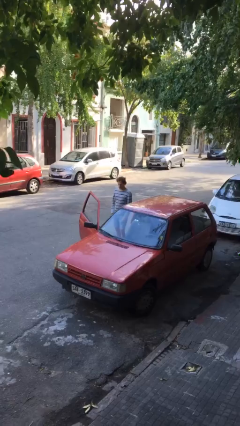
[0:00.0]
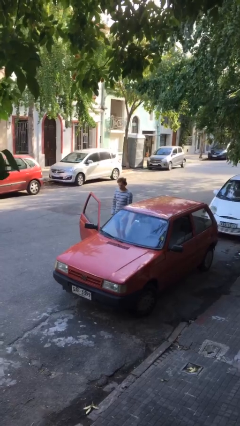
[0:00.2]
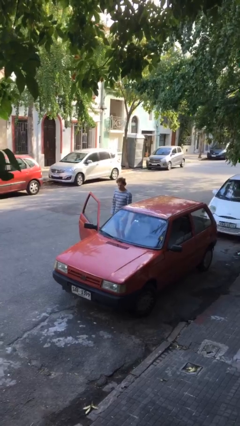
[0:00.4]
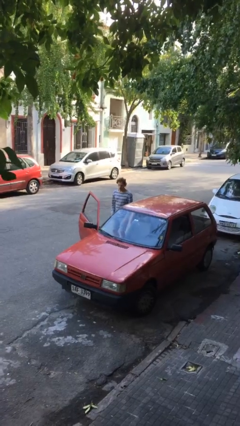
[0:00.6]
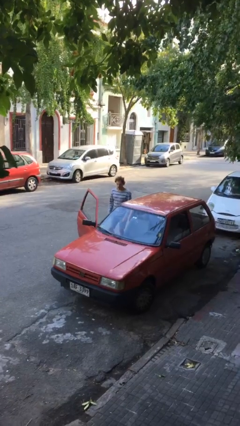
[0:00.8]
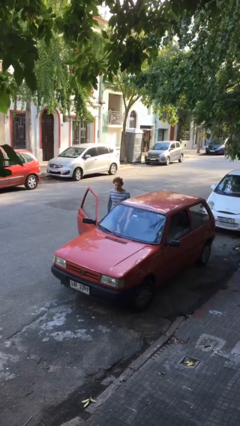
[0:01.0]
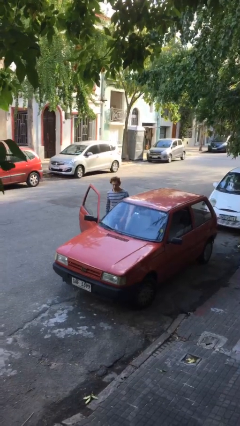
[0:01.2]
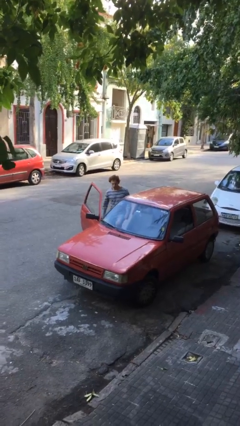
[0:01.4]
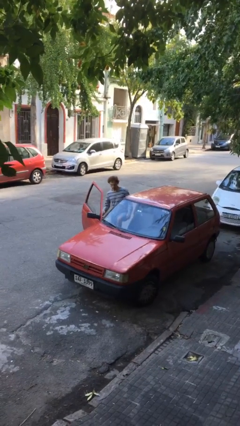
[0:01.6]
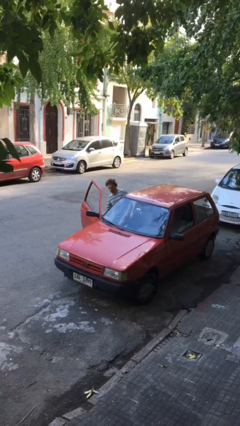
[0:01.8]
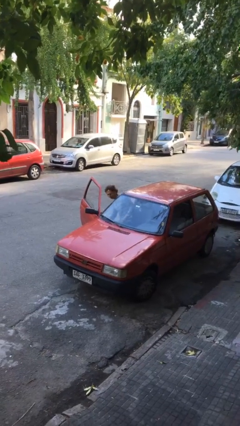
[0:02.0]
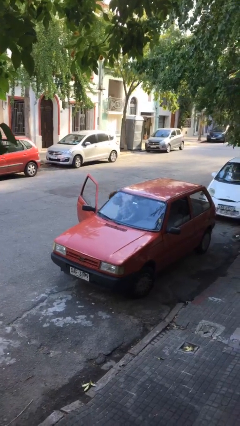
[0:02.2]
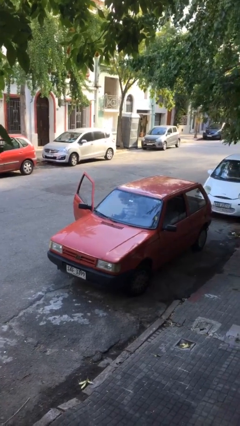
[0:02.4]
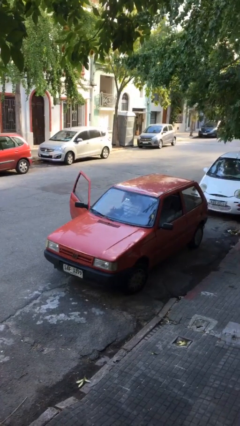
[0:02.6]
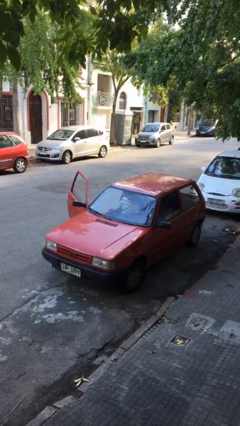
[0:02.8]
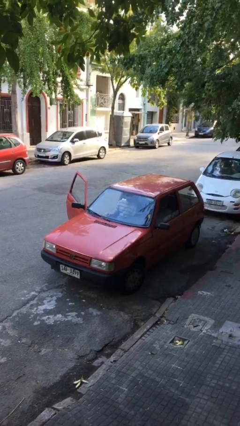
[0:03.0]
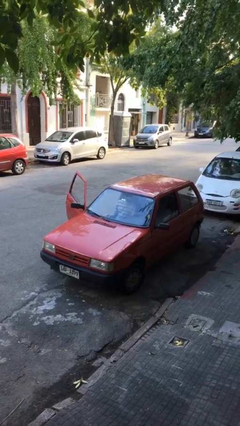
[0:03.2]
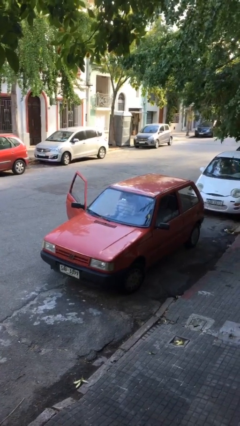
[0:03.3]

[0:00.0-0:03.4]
person enters car

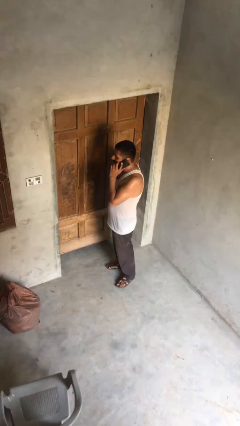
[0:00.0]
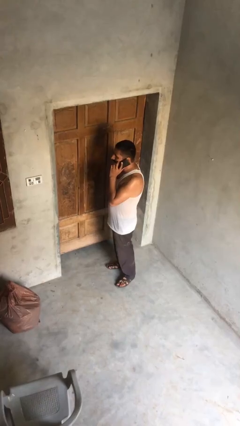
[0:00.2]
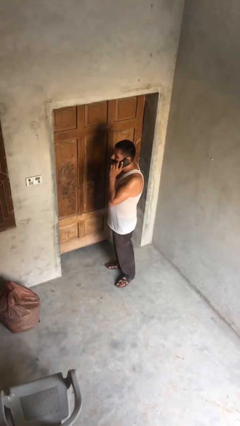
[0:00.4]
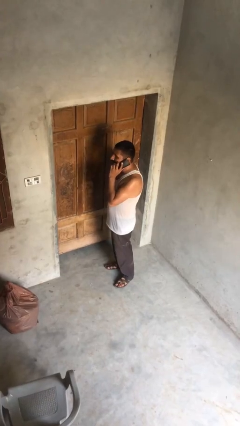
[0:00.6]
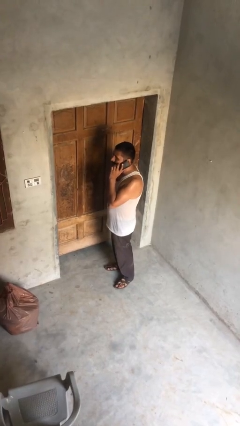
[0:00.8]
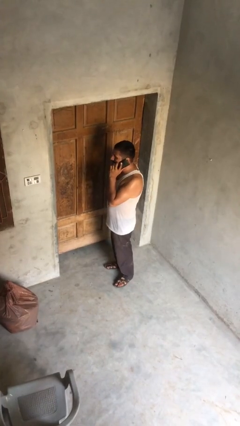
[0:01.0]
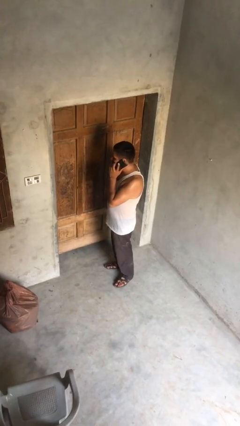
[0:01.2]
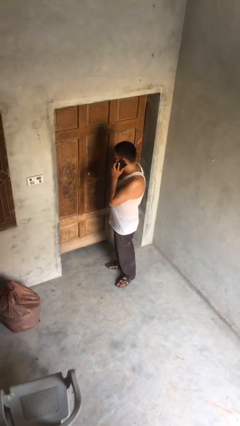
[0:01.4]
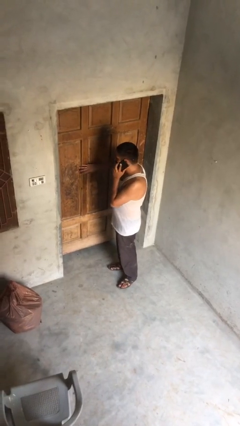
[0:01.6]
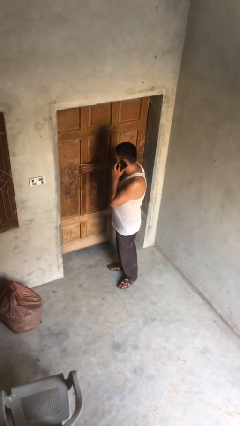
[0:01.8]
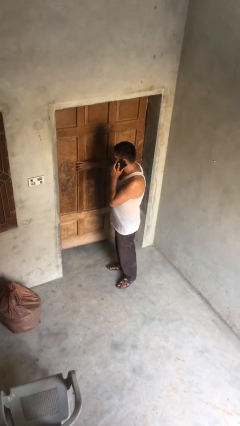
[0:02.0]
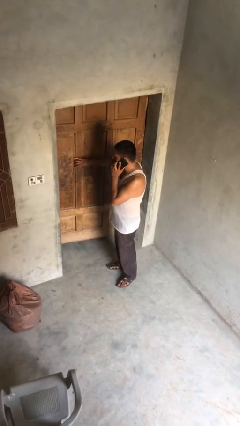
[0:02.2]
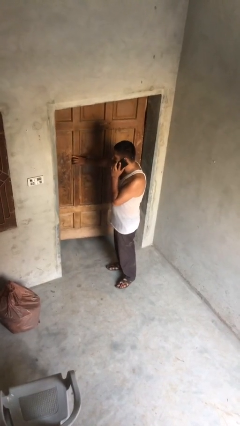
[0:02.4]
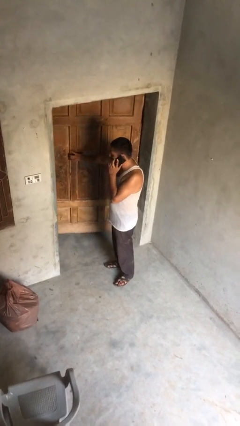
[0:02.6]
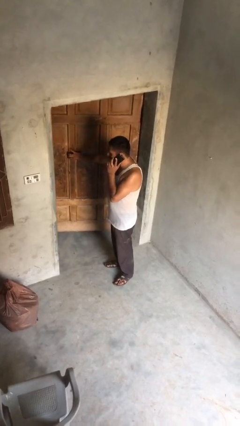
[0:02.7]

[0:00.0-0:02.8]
person opens facility door

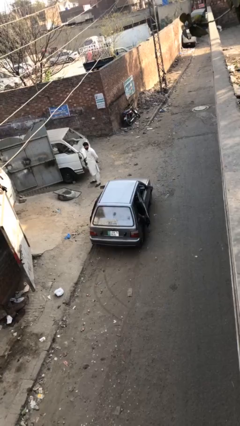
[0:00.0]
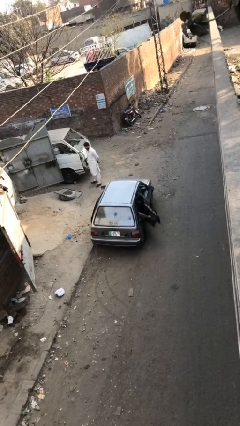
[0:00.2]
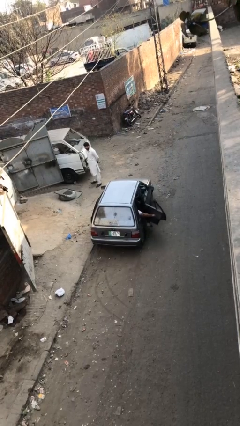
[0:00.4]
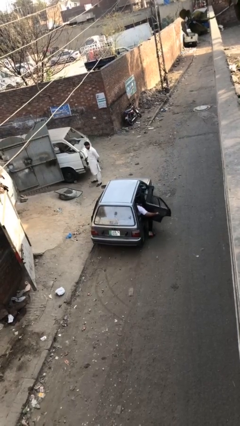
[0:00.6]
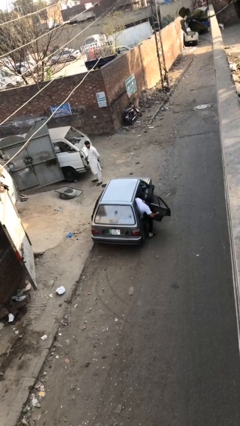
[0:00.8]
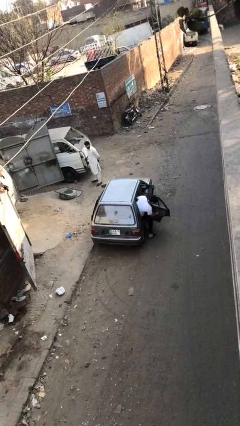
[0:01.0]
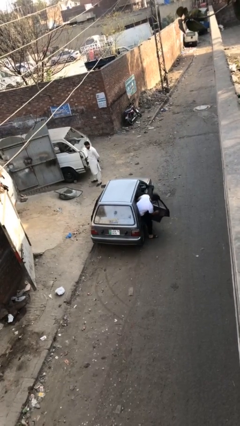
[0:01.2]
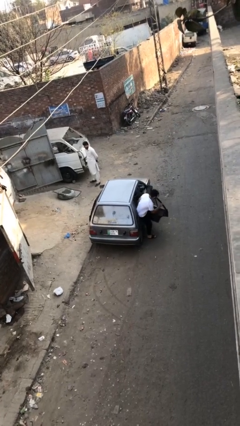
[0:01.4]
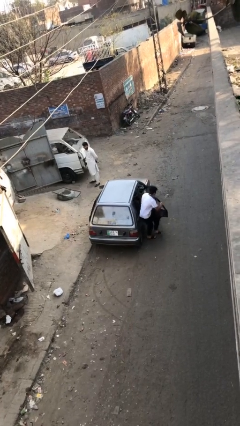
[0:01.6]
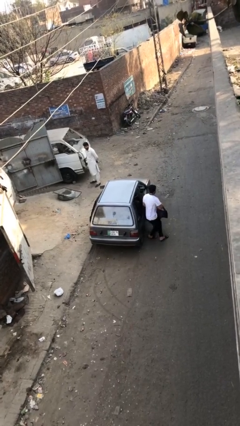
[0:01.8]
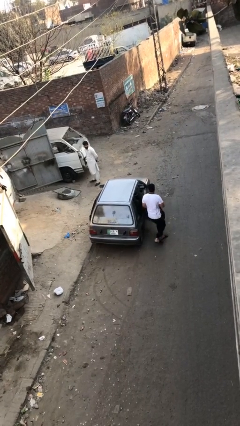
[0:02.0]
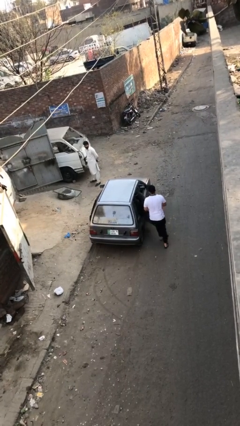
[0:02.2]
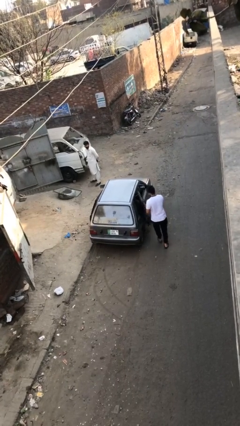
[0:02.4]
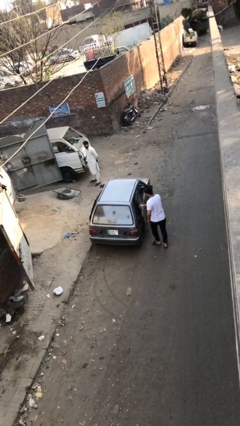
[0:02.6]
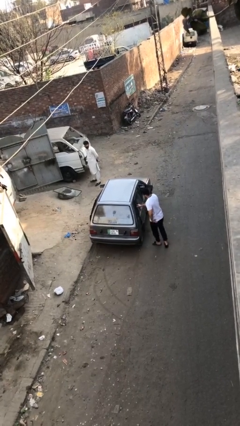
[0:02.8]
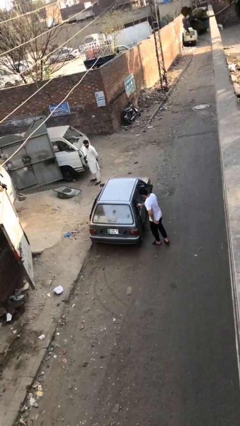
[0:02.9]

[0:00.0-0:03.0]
car drops off person

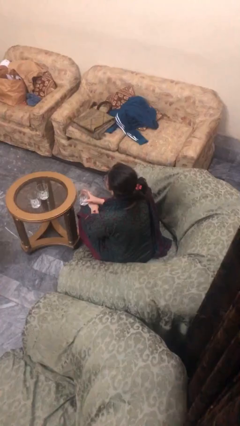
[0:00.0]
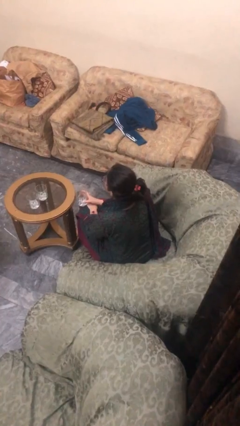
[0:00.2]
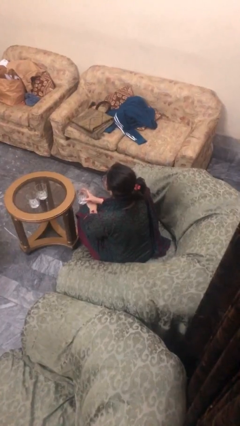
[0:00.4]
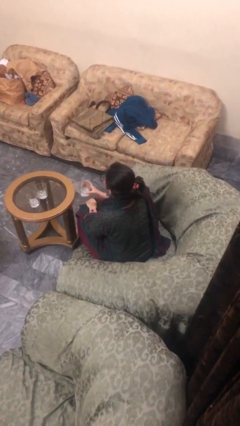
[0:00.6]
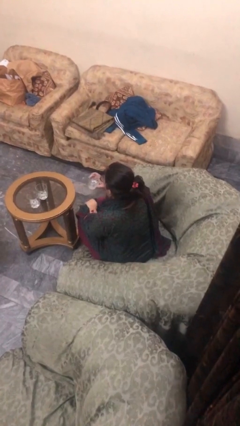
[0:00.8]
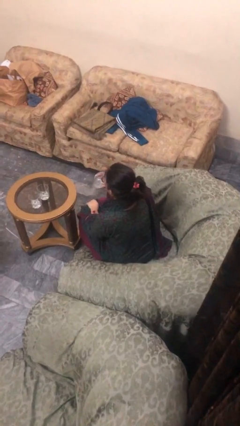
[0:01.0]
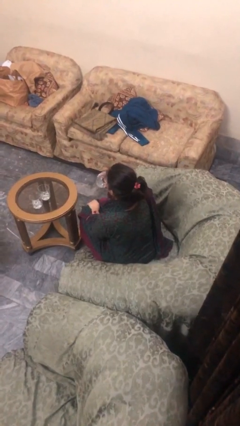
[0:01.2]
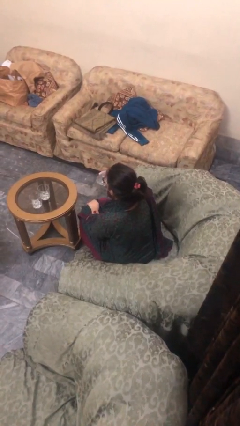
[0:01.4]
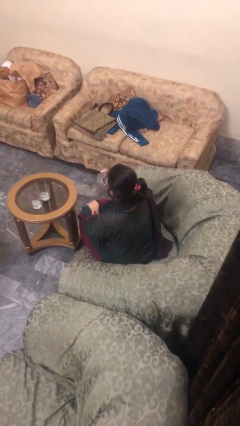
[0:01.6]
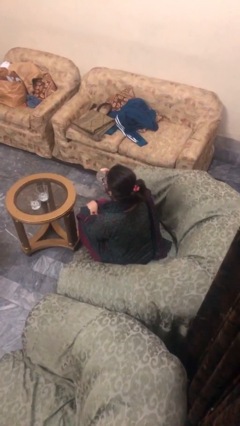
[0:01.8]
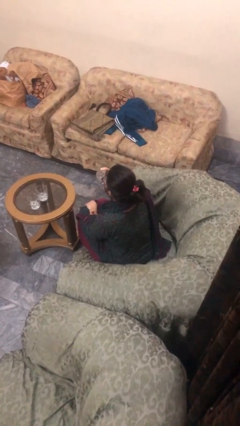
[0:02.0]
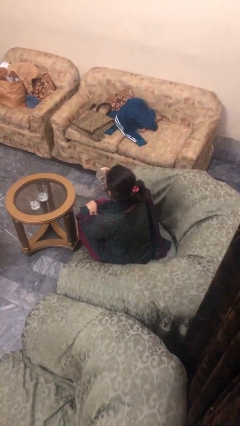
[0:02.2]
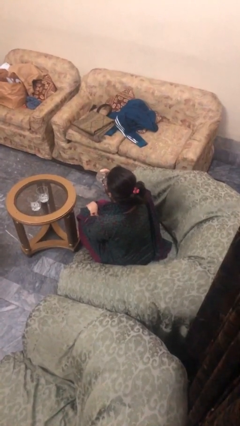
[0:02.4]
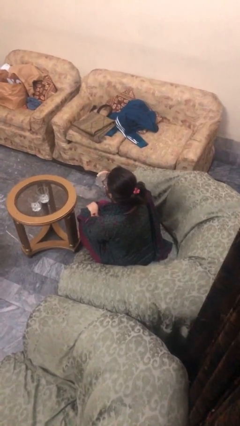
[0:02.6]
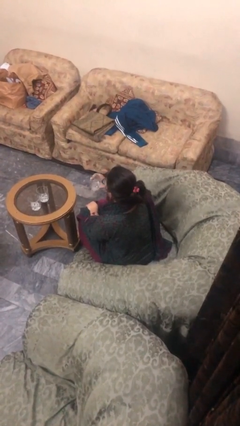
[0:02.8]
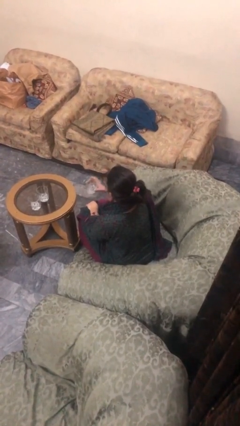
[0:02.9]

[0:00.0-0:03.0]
person drinks from shotglass

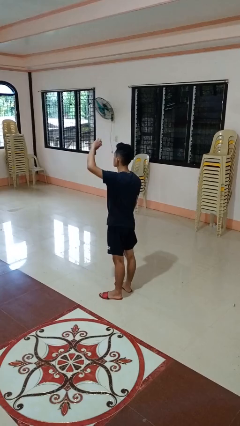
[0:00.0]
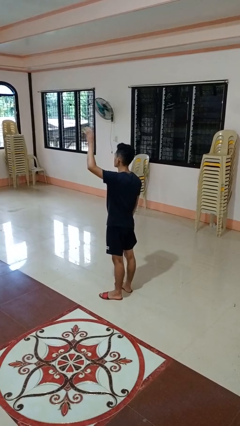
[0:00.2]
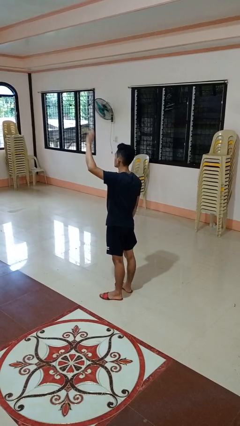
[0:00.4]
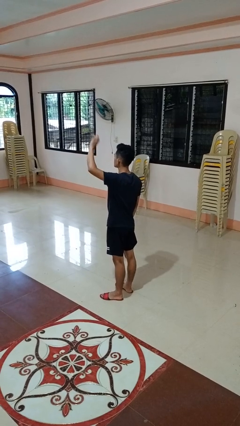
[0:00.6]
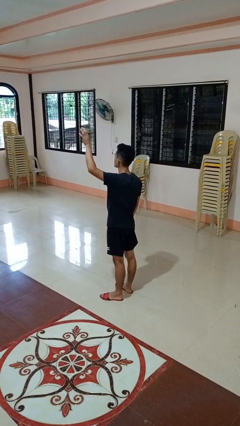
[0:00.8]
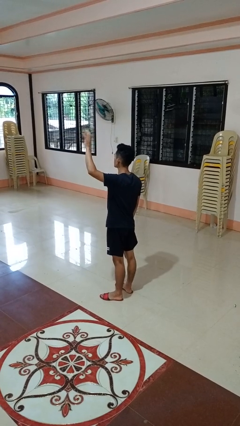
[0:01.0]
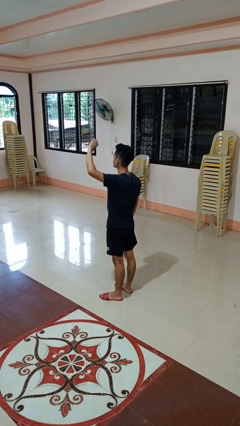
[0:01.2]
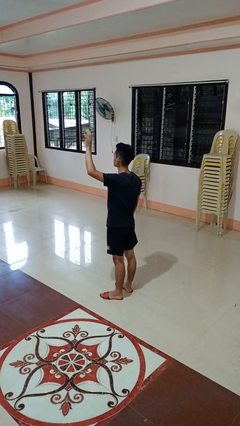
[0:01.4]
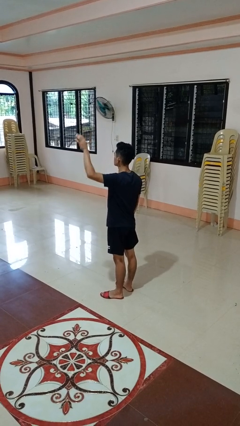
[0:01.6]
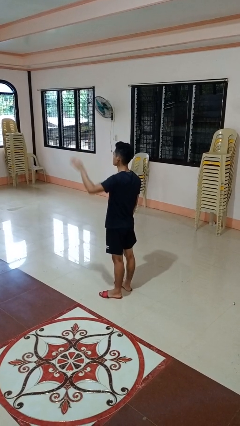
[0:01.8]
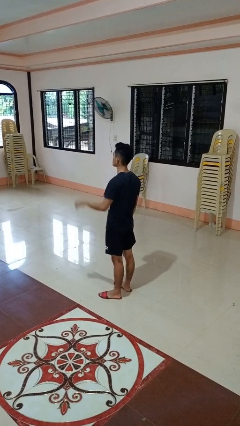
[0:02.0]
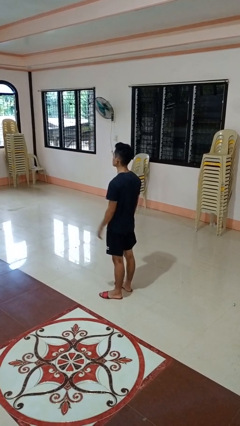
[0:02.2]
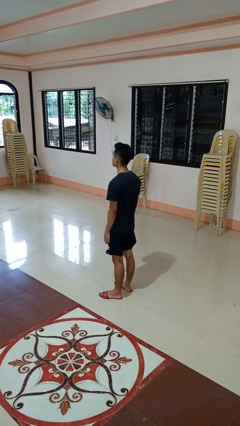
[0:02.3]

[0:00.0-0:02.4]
person waves at person

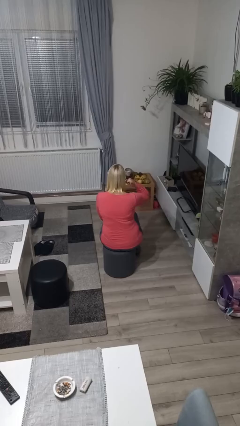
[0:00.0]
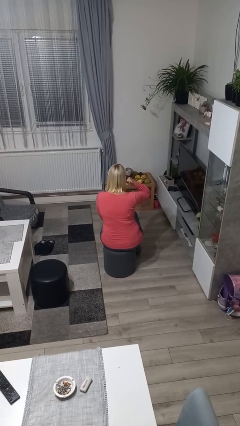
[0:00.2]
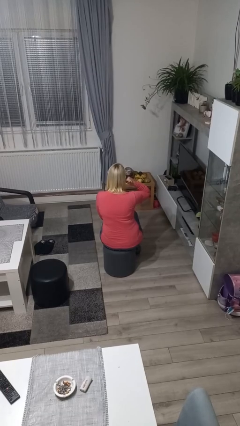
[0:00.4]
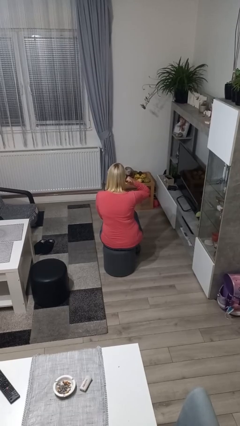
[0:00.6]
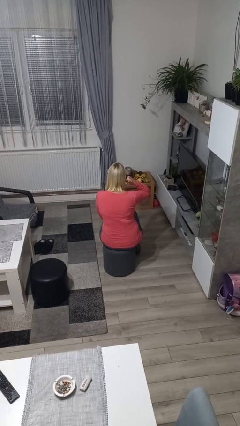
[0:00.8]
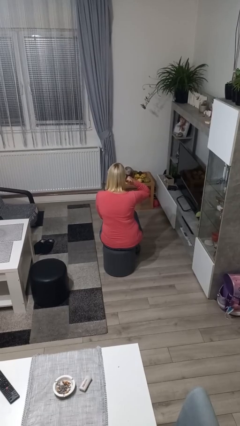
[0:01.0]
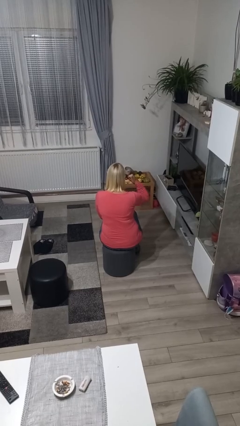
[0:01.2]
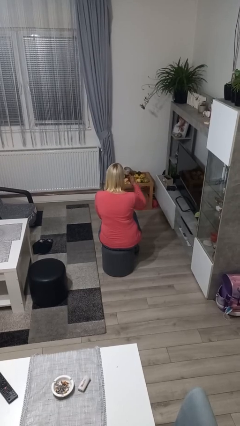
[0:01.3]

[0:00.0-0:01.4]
person gestures call me

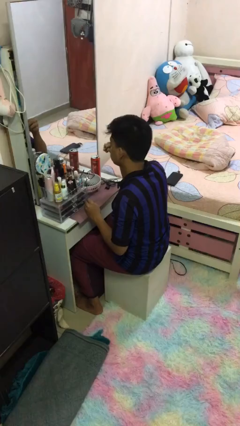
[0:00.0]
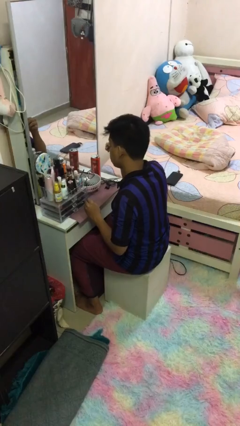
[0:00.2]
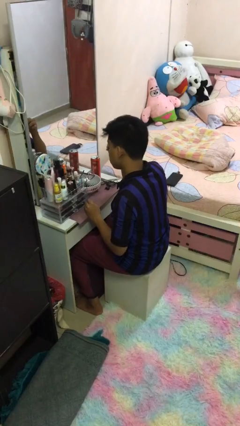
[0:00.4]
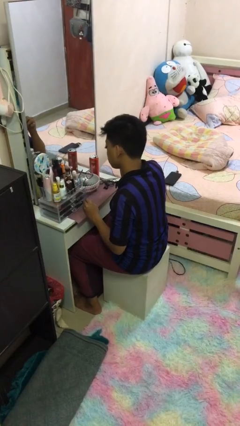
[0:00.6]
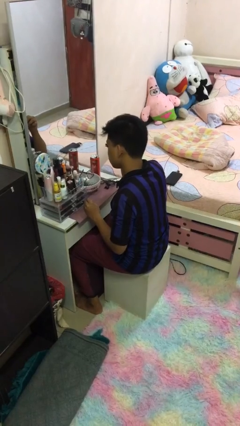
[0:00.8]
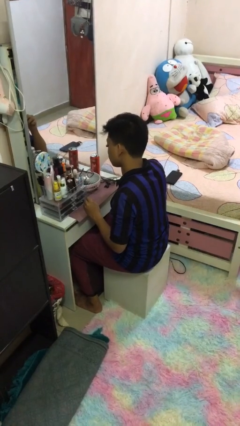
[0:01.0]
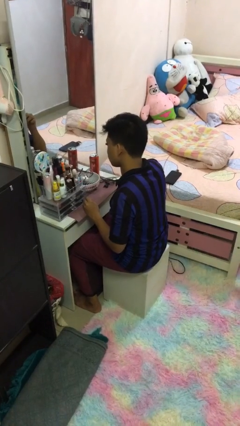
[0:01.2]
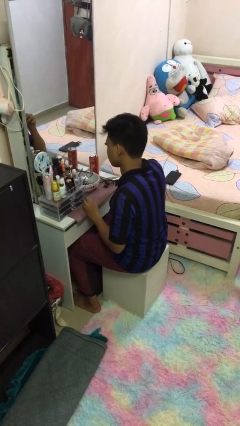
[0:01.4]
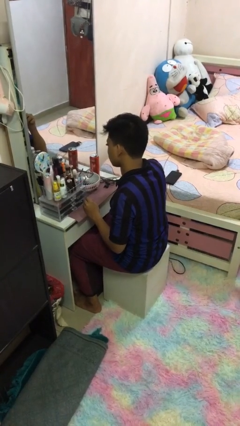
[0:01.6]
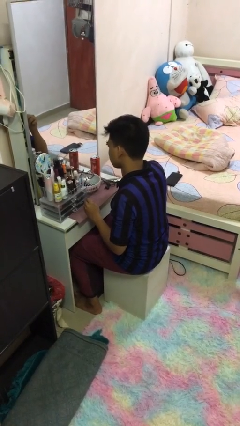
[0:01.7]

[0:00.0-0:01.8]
person applies eye makeup
